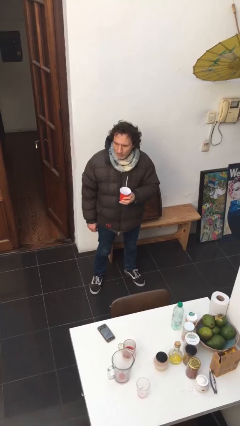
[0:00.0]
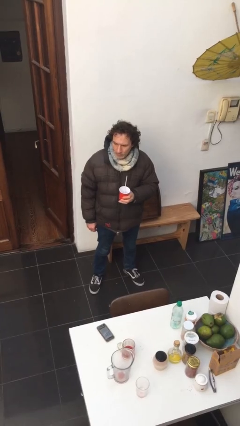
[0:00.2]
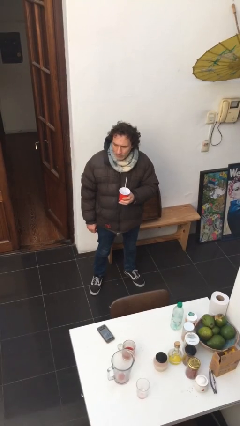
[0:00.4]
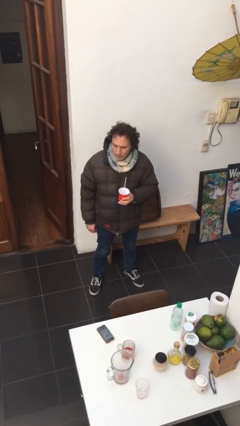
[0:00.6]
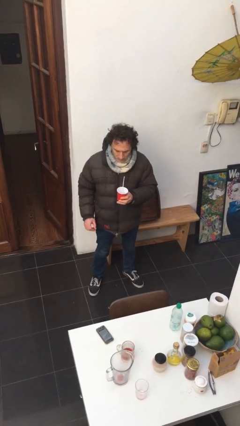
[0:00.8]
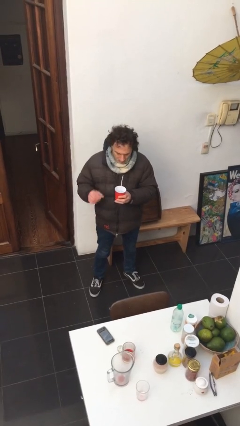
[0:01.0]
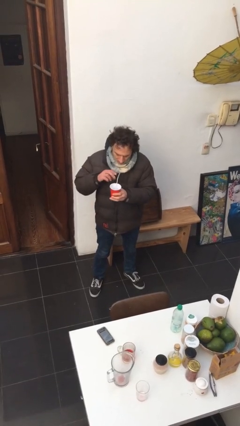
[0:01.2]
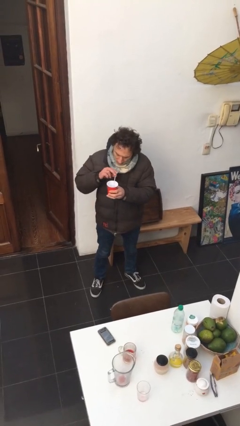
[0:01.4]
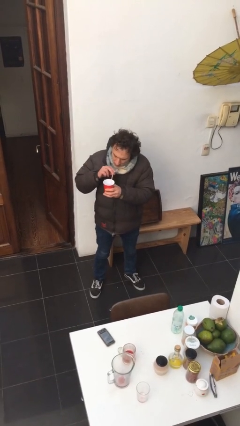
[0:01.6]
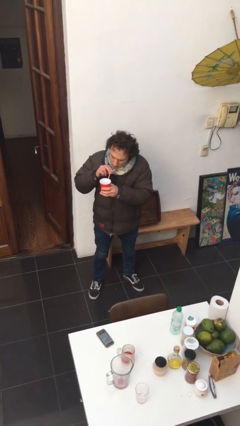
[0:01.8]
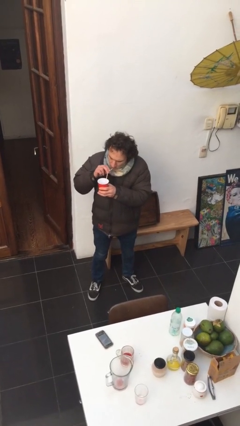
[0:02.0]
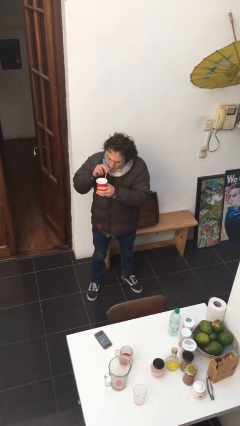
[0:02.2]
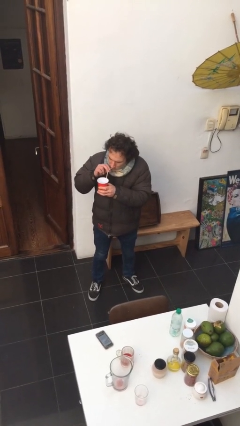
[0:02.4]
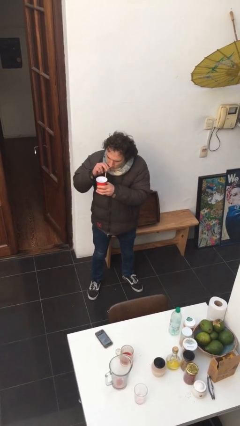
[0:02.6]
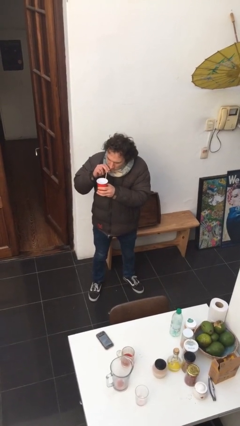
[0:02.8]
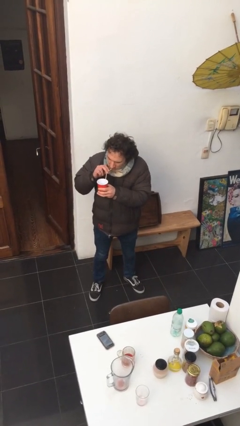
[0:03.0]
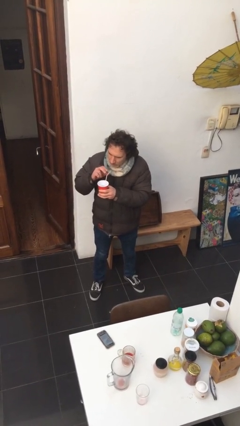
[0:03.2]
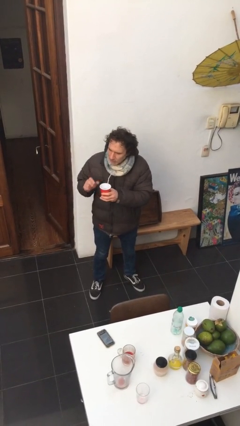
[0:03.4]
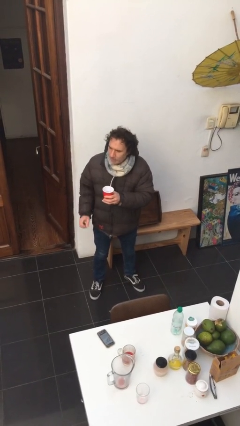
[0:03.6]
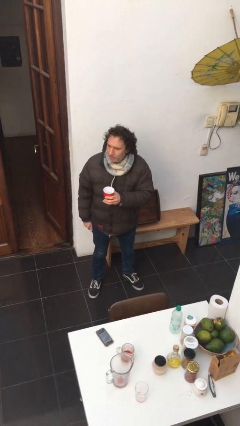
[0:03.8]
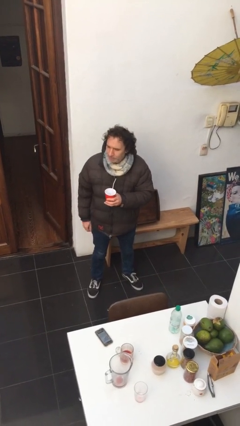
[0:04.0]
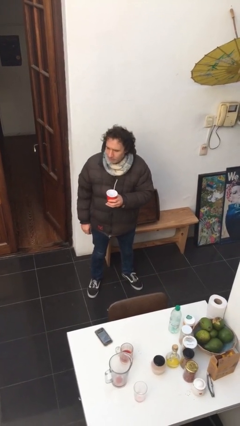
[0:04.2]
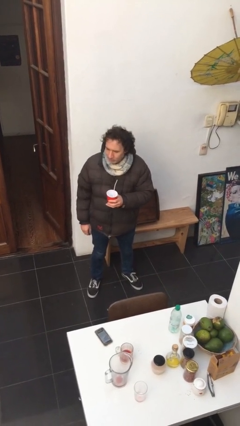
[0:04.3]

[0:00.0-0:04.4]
person drinks from straw

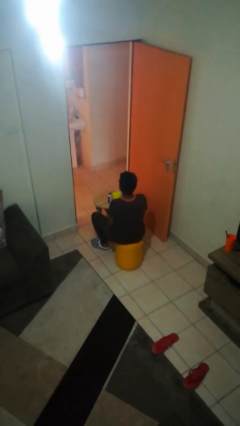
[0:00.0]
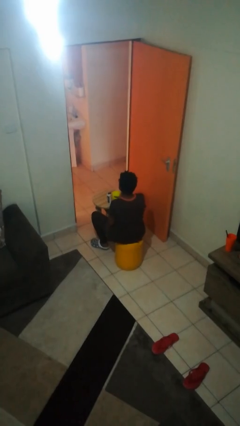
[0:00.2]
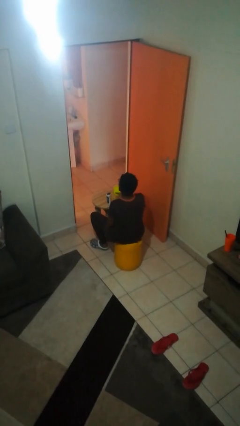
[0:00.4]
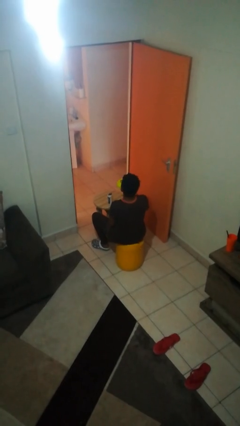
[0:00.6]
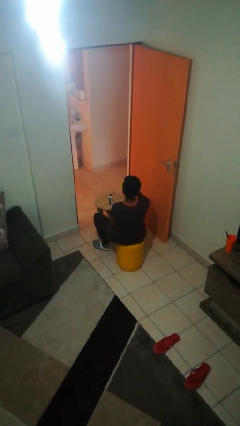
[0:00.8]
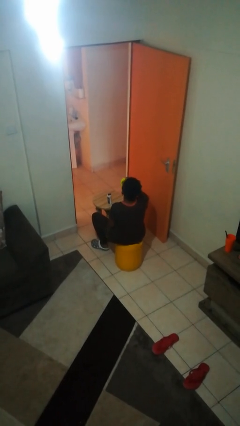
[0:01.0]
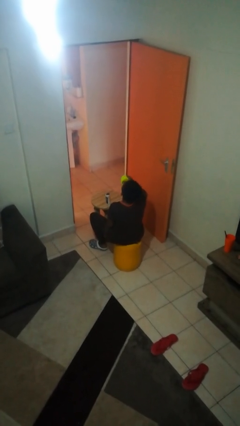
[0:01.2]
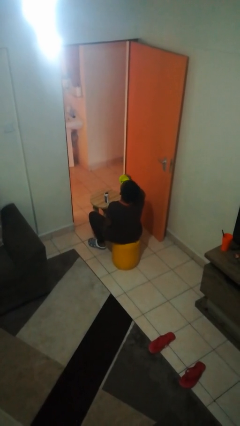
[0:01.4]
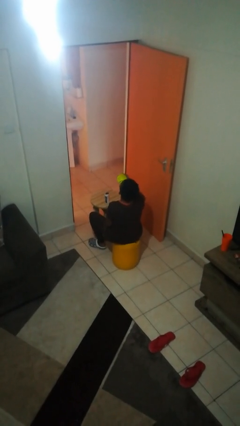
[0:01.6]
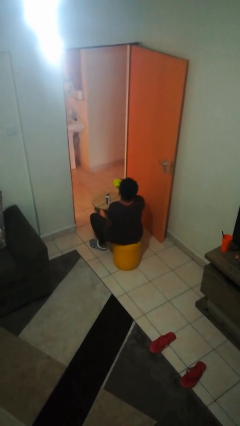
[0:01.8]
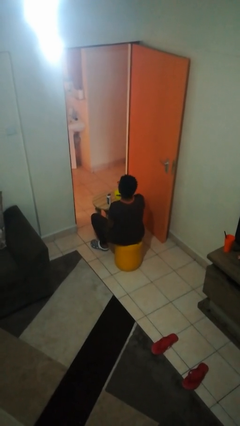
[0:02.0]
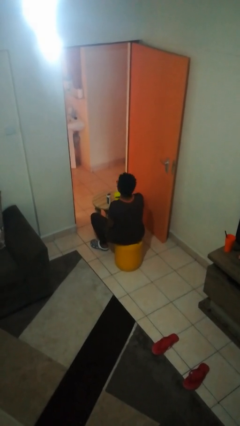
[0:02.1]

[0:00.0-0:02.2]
person drinks from cup

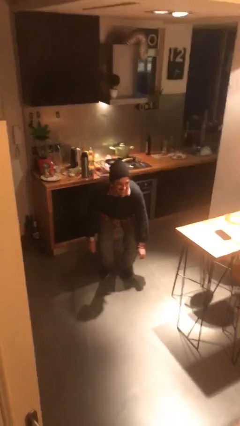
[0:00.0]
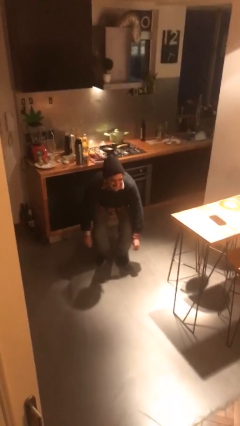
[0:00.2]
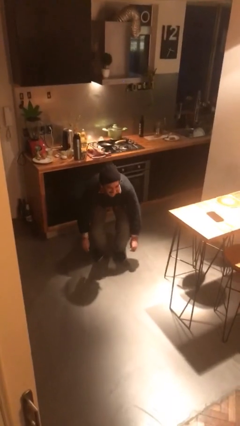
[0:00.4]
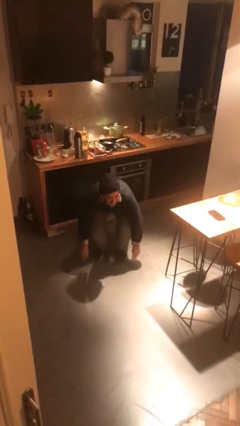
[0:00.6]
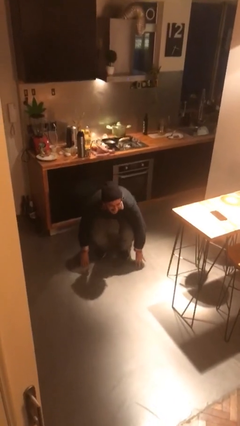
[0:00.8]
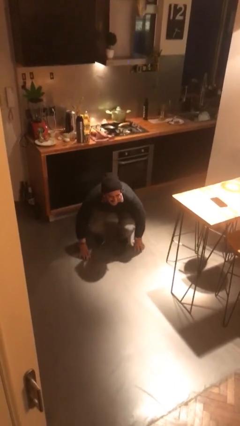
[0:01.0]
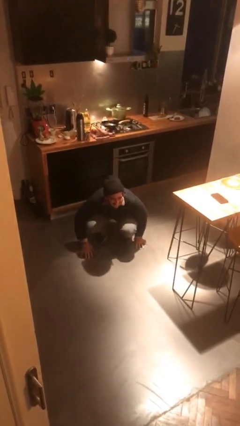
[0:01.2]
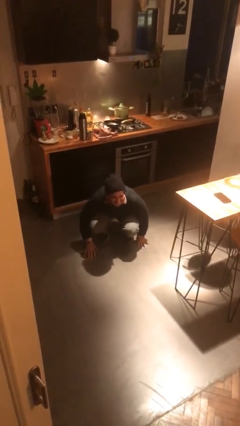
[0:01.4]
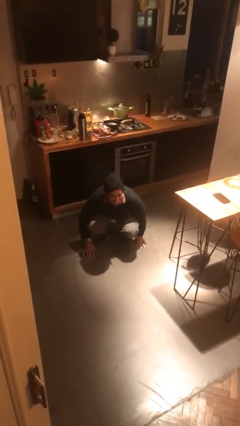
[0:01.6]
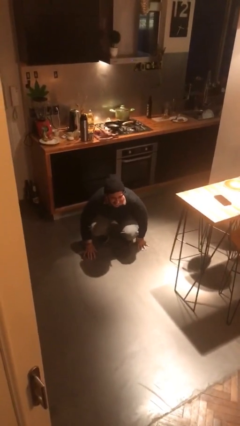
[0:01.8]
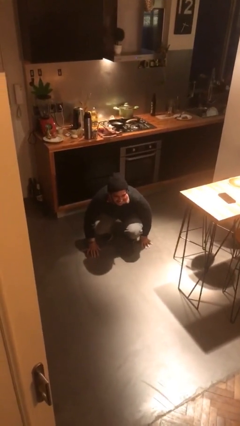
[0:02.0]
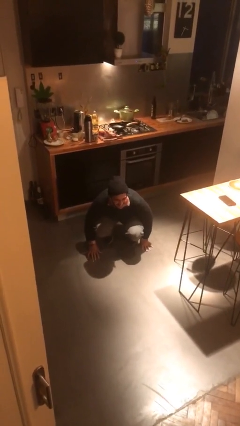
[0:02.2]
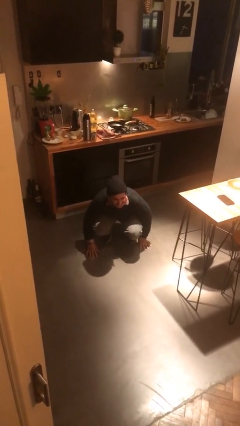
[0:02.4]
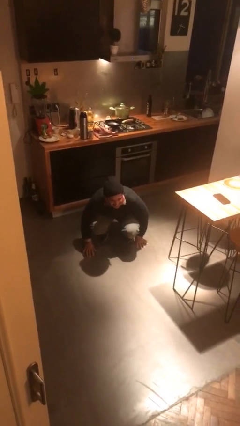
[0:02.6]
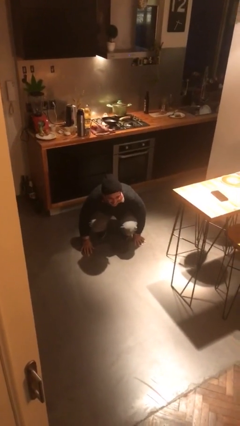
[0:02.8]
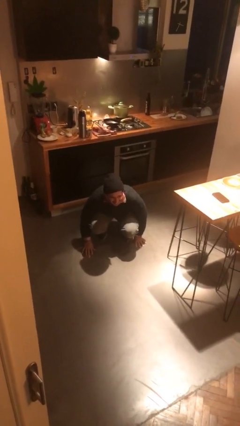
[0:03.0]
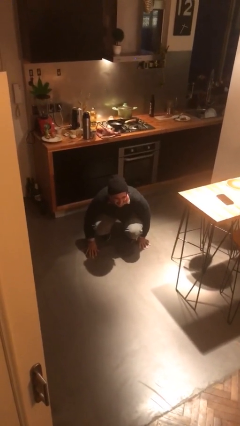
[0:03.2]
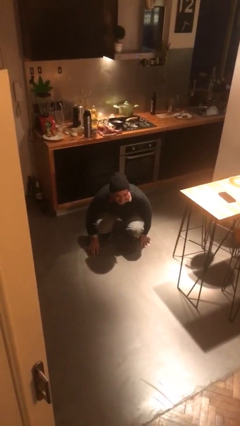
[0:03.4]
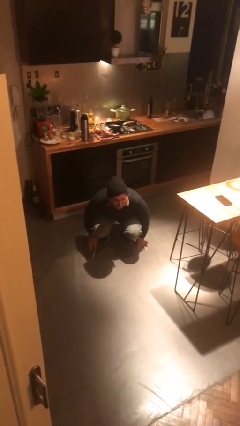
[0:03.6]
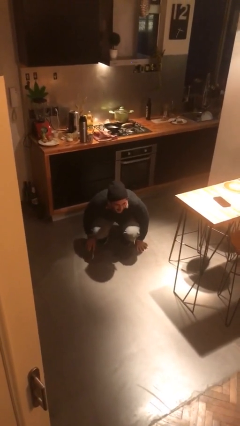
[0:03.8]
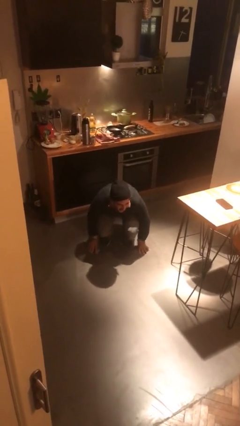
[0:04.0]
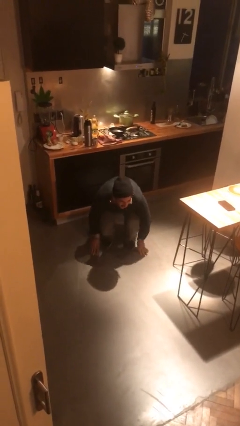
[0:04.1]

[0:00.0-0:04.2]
person squats

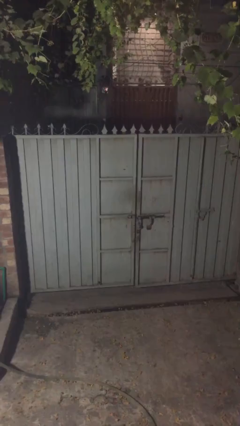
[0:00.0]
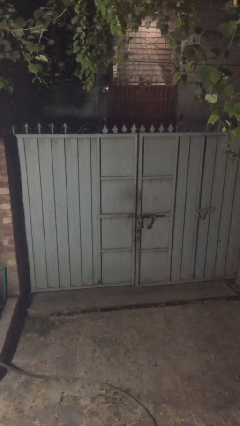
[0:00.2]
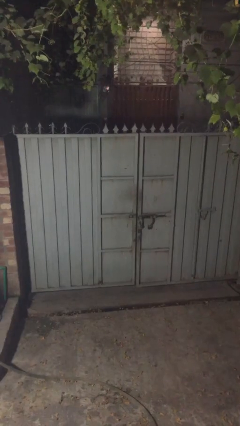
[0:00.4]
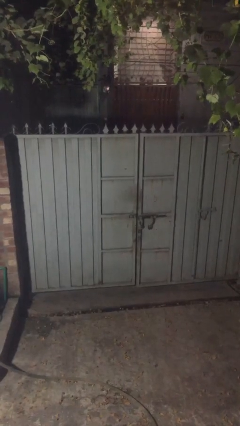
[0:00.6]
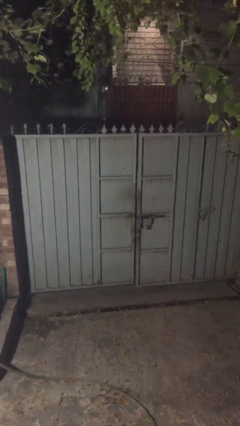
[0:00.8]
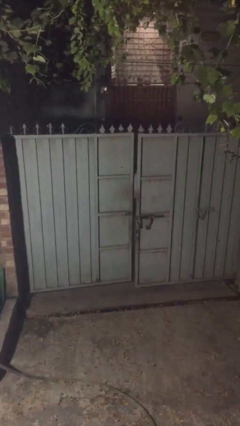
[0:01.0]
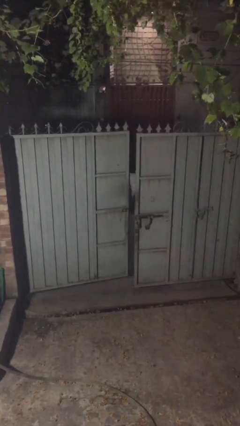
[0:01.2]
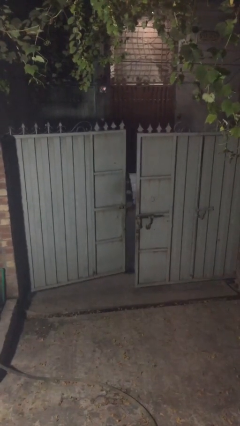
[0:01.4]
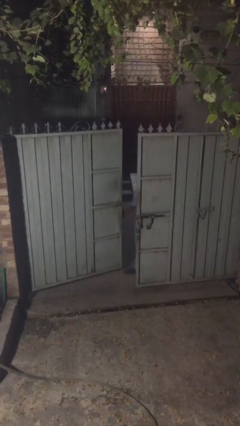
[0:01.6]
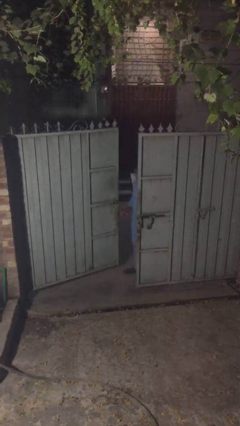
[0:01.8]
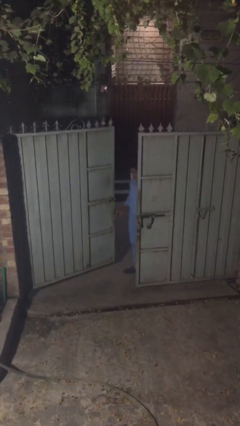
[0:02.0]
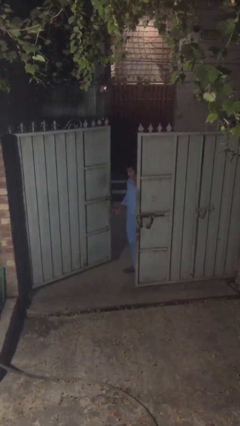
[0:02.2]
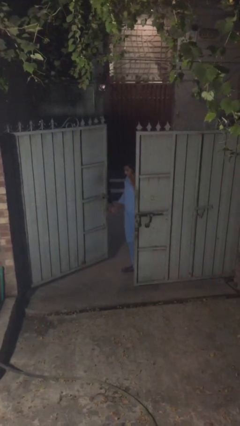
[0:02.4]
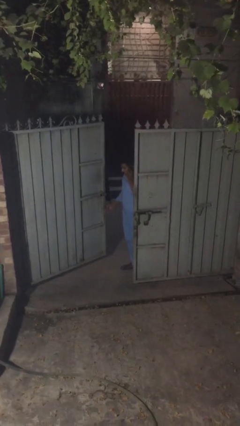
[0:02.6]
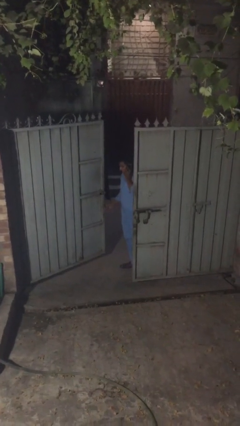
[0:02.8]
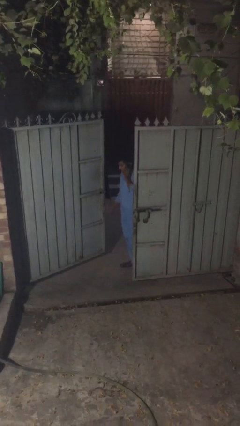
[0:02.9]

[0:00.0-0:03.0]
person opens facility door

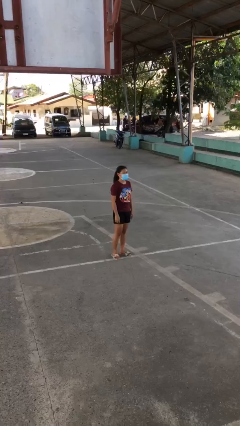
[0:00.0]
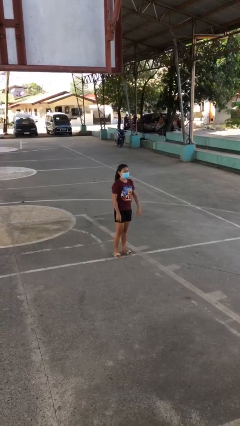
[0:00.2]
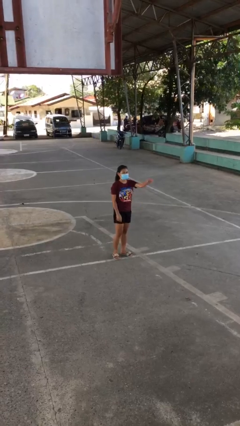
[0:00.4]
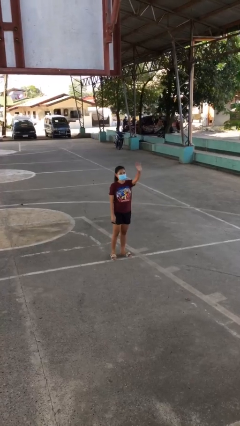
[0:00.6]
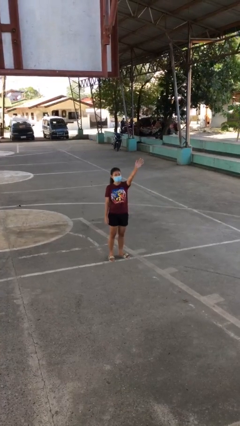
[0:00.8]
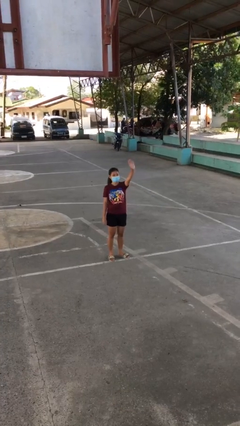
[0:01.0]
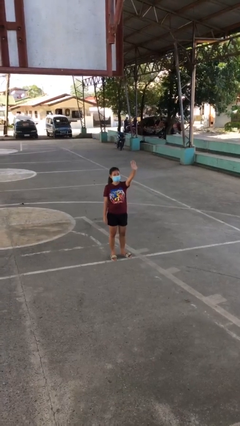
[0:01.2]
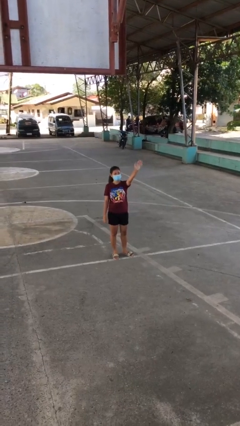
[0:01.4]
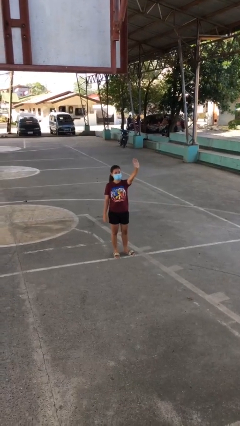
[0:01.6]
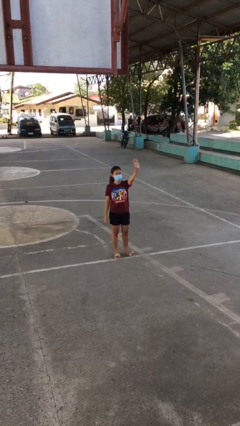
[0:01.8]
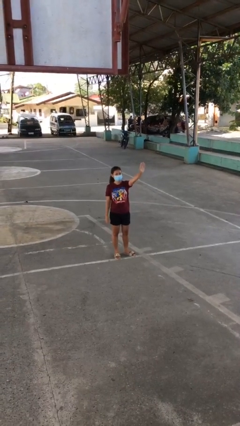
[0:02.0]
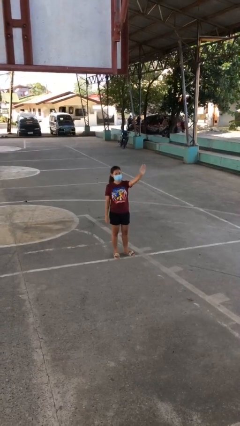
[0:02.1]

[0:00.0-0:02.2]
person waves at person

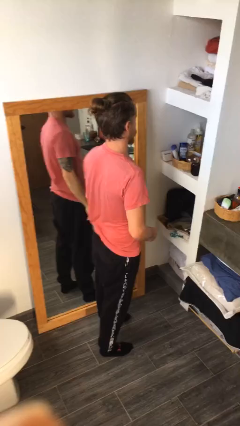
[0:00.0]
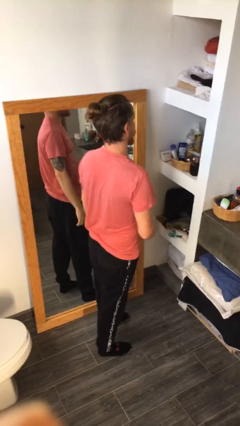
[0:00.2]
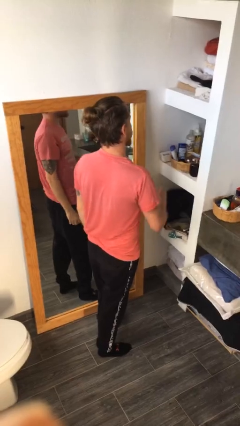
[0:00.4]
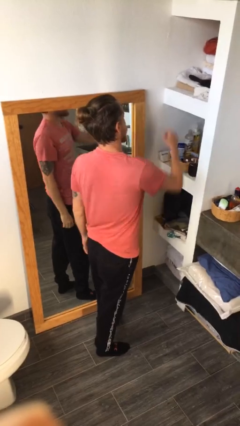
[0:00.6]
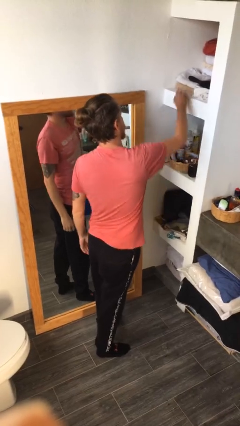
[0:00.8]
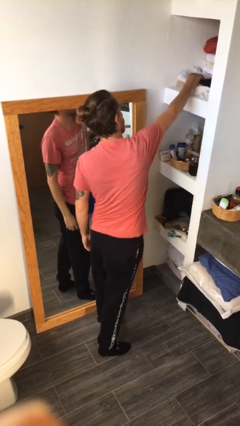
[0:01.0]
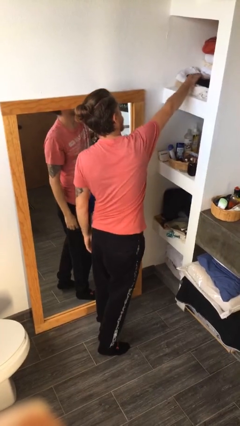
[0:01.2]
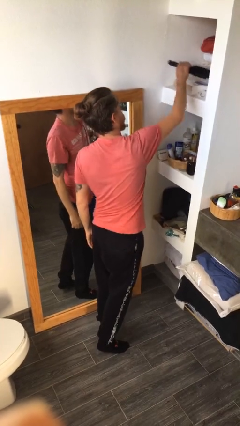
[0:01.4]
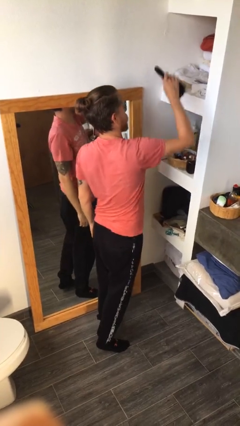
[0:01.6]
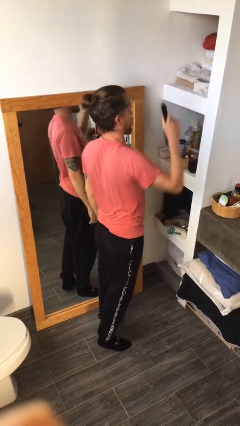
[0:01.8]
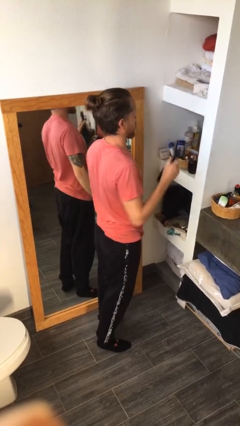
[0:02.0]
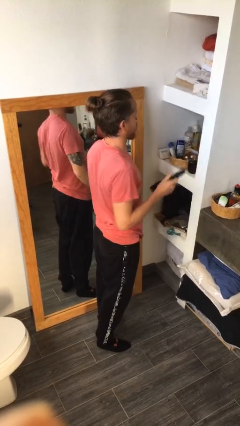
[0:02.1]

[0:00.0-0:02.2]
person picks up object from countertop
